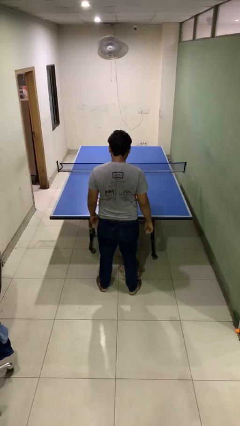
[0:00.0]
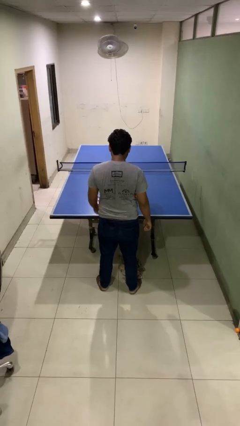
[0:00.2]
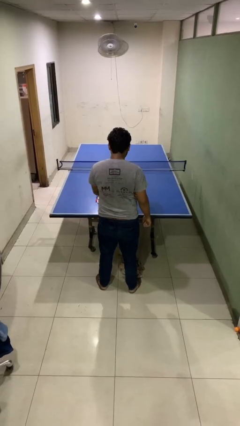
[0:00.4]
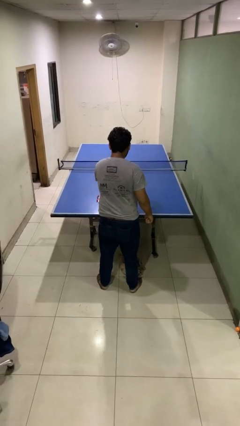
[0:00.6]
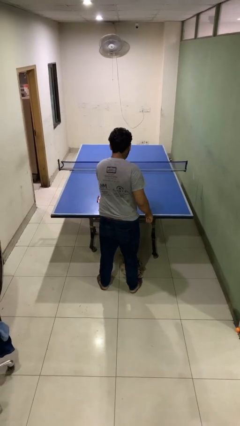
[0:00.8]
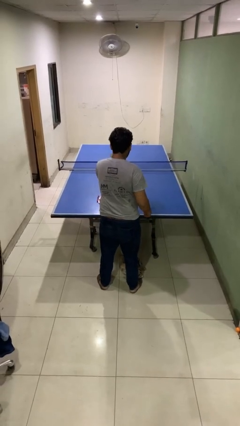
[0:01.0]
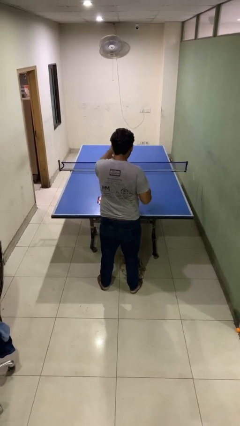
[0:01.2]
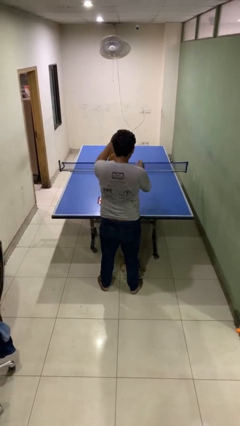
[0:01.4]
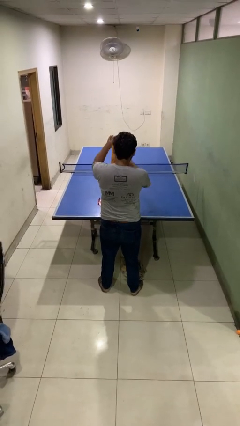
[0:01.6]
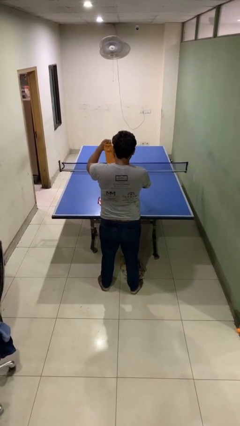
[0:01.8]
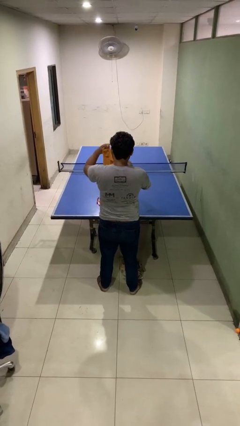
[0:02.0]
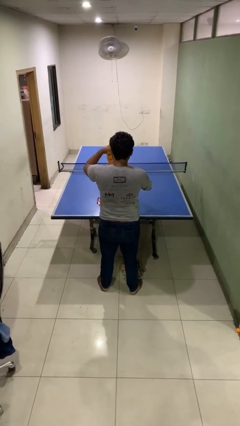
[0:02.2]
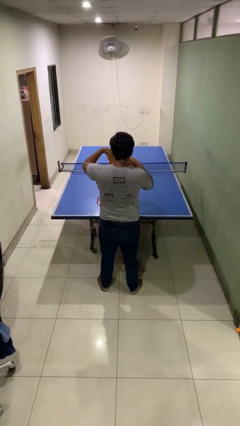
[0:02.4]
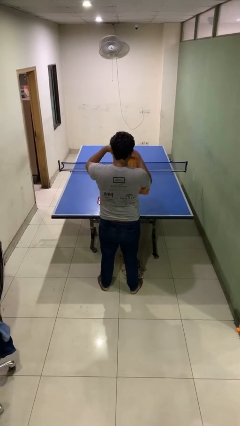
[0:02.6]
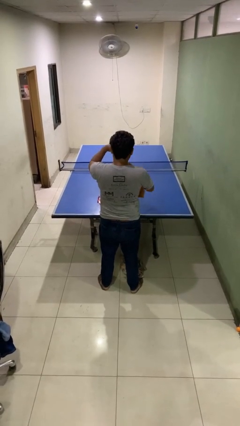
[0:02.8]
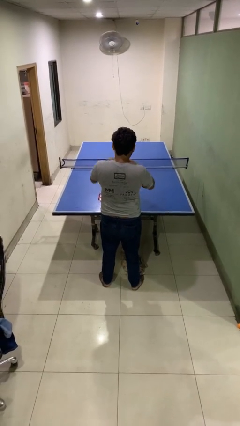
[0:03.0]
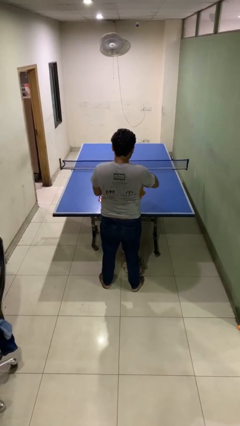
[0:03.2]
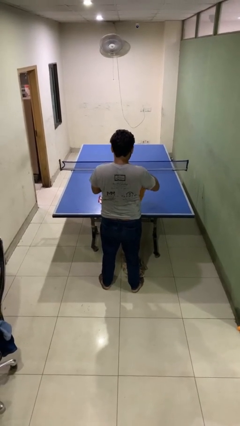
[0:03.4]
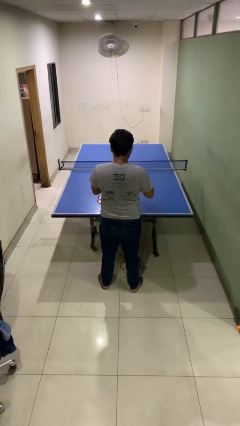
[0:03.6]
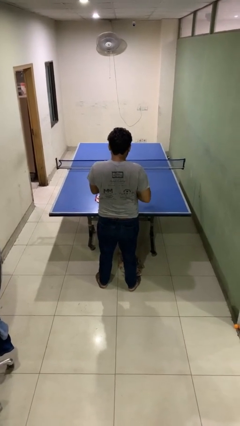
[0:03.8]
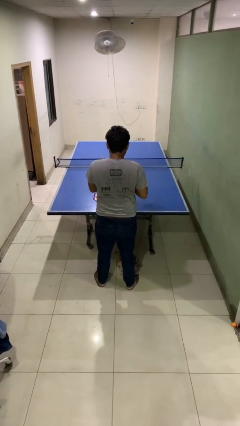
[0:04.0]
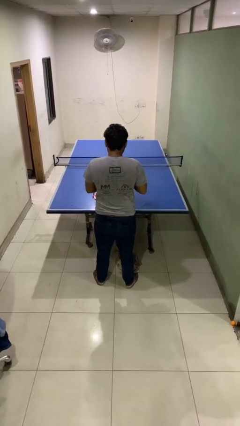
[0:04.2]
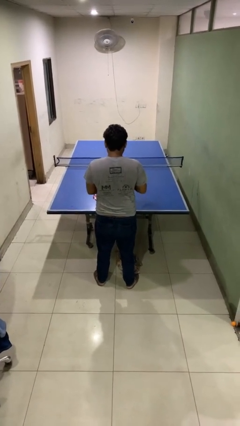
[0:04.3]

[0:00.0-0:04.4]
person folds shirt

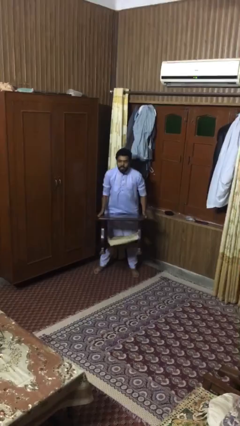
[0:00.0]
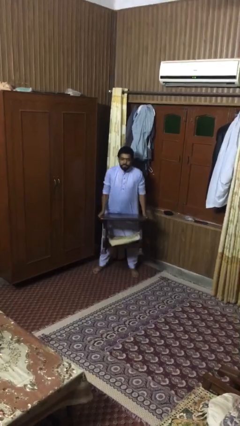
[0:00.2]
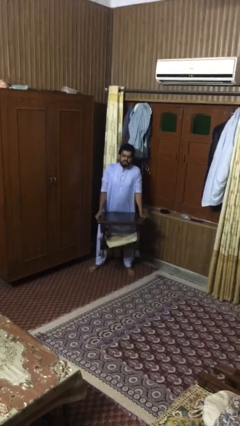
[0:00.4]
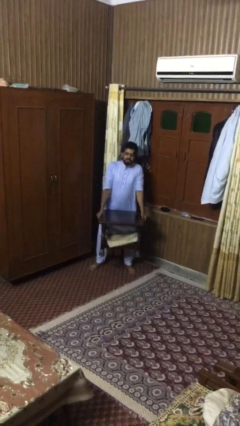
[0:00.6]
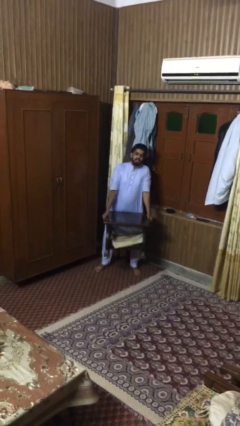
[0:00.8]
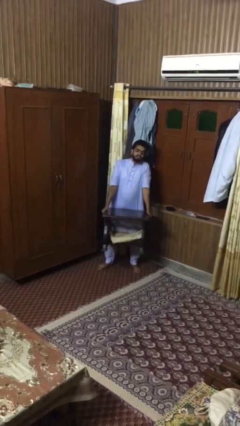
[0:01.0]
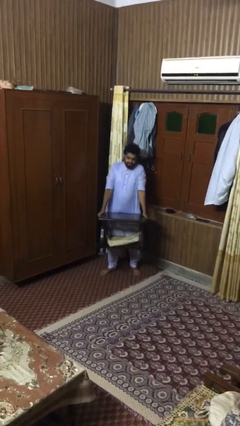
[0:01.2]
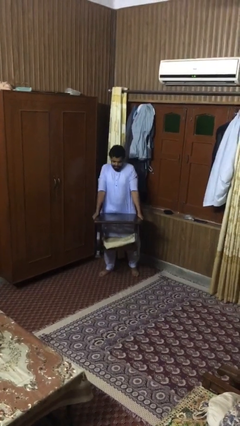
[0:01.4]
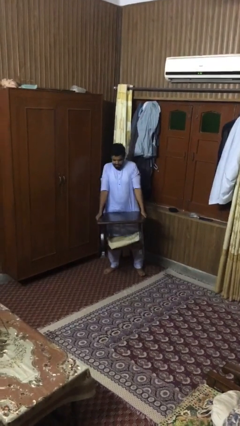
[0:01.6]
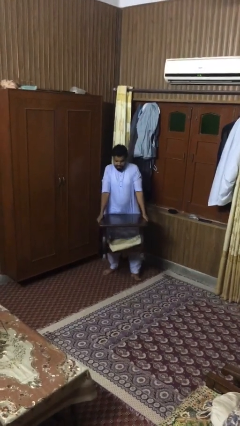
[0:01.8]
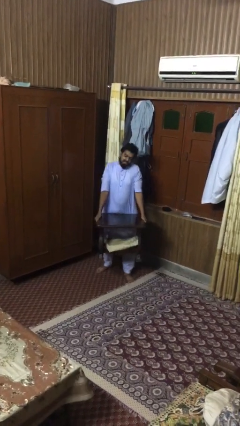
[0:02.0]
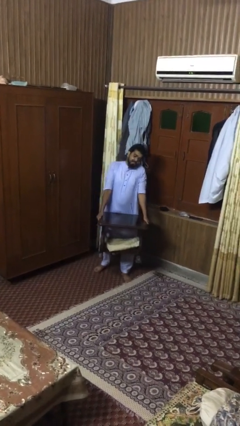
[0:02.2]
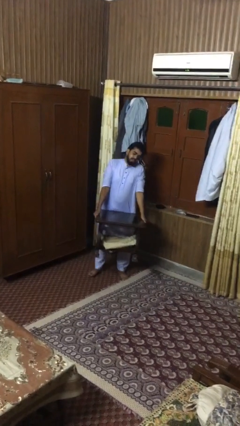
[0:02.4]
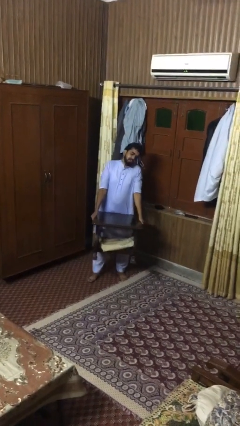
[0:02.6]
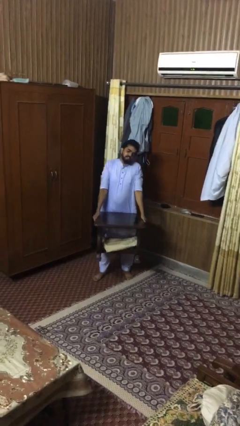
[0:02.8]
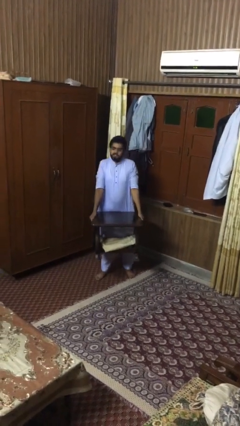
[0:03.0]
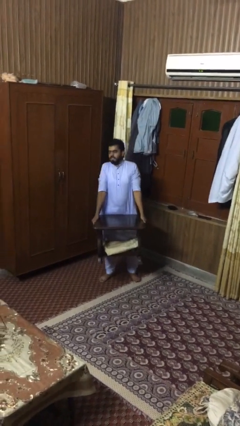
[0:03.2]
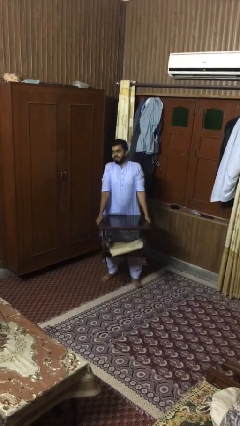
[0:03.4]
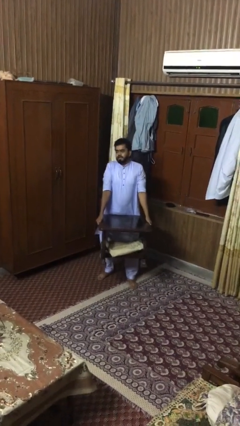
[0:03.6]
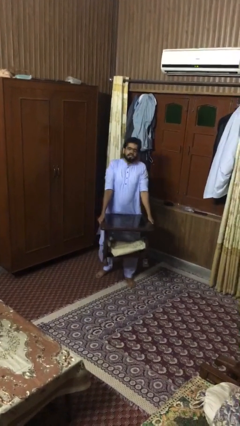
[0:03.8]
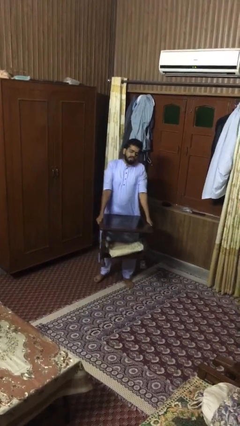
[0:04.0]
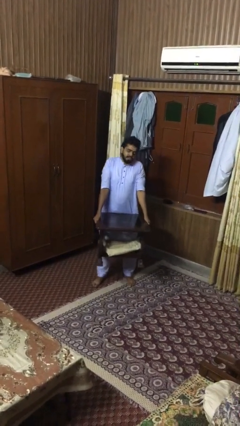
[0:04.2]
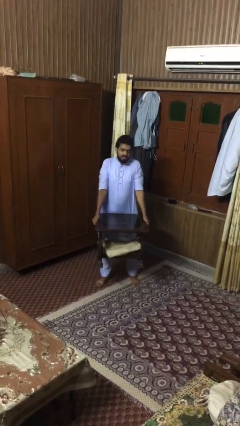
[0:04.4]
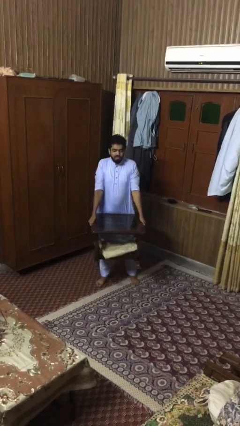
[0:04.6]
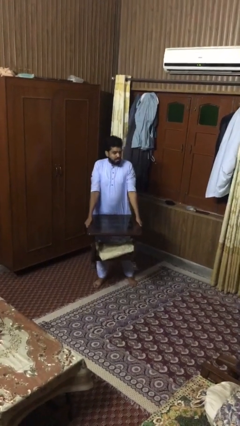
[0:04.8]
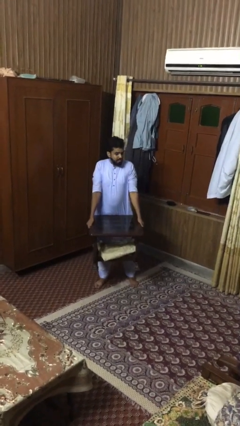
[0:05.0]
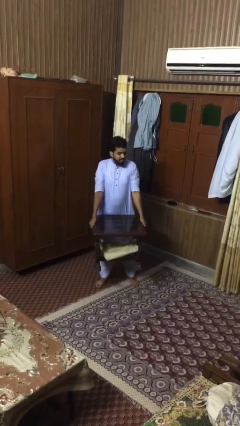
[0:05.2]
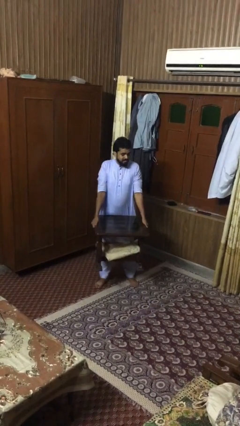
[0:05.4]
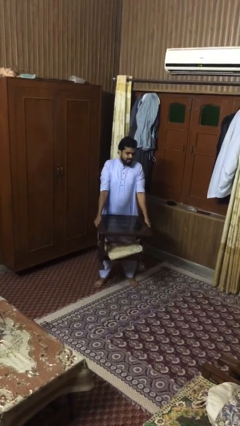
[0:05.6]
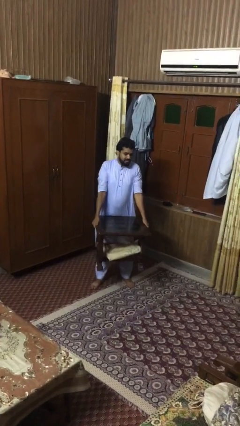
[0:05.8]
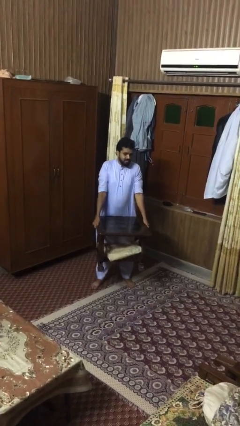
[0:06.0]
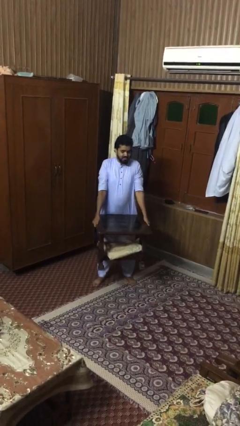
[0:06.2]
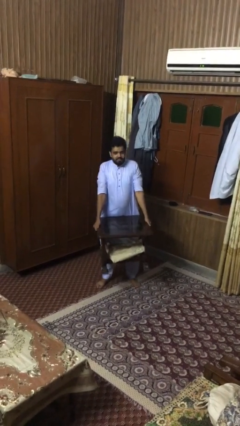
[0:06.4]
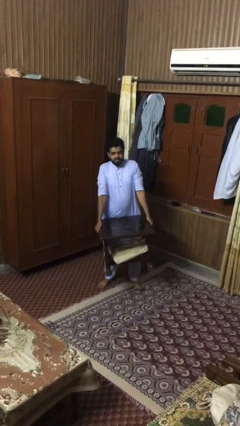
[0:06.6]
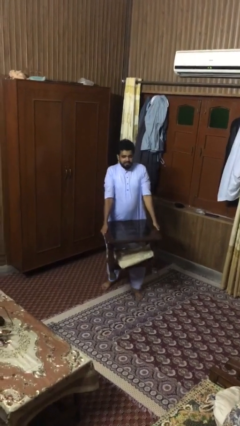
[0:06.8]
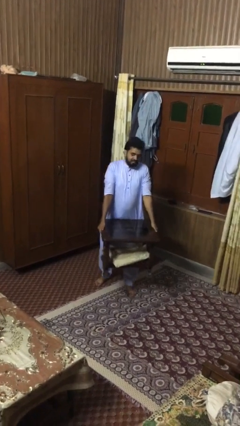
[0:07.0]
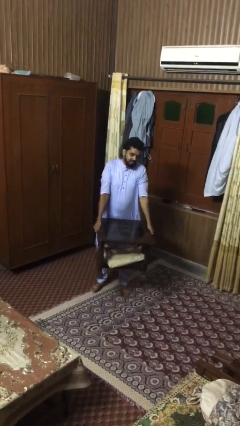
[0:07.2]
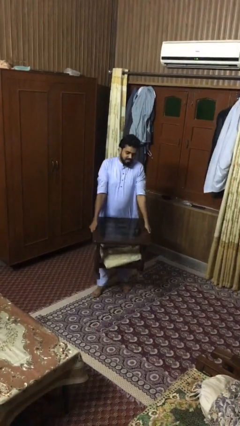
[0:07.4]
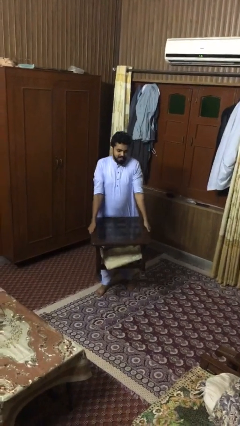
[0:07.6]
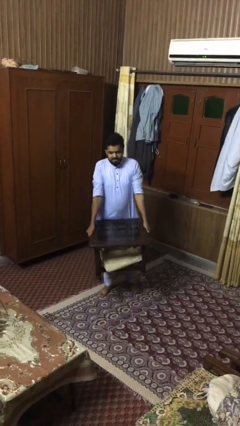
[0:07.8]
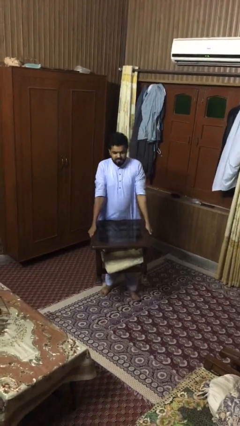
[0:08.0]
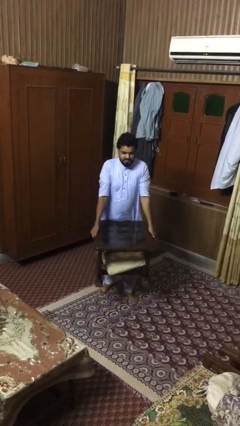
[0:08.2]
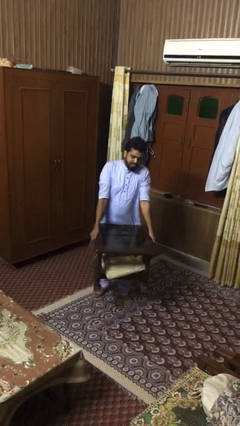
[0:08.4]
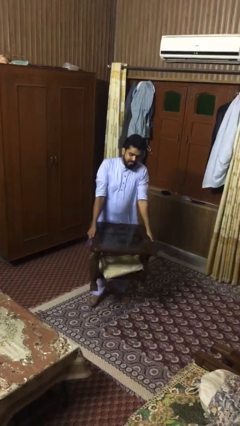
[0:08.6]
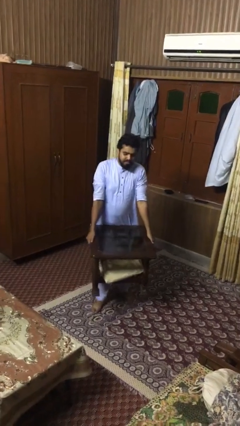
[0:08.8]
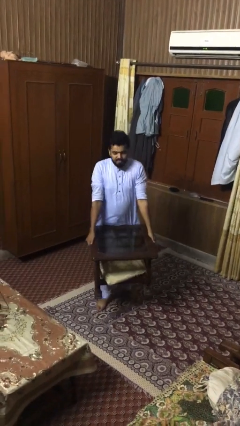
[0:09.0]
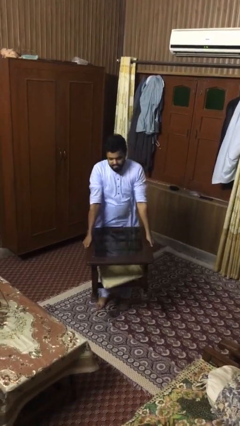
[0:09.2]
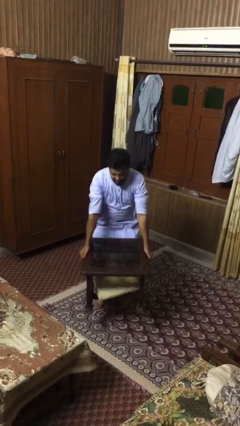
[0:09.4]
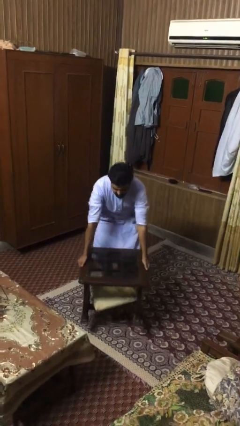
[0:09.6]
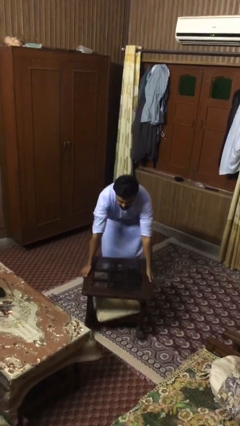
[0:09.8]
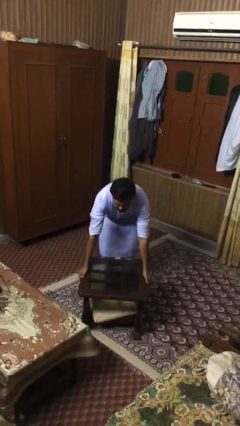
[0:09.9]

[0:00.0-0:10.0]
person carries heavy object

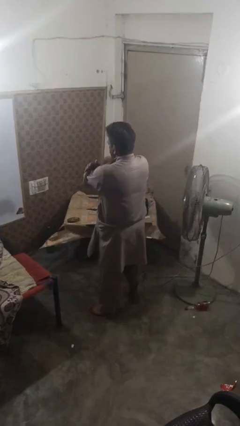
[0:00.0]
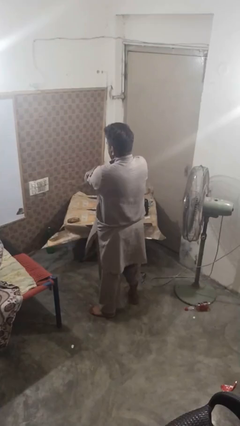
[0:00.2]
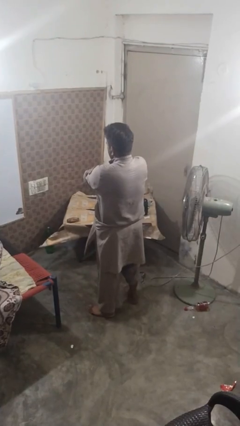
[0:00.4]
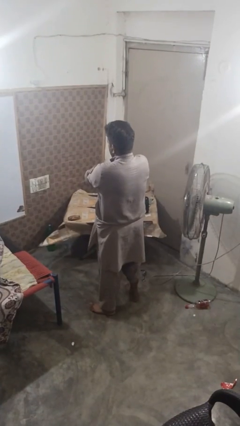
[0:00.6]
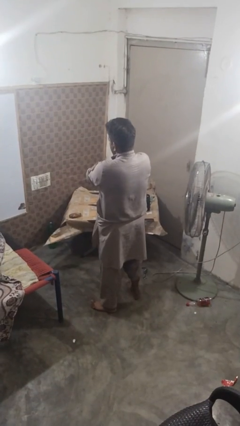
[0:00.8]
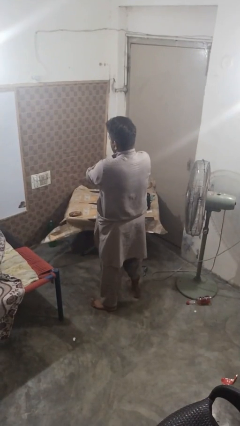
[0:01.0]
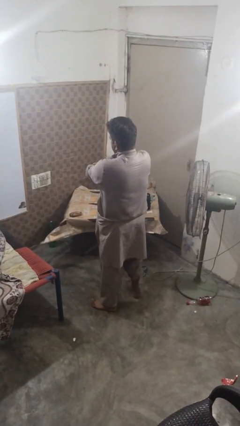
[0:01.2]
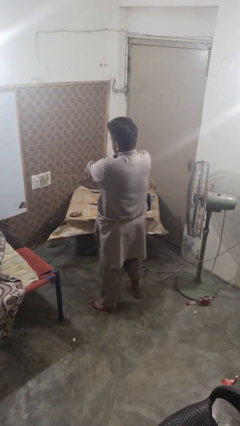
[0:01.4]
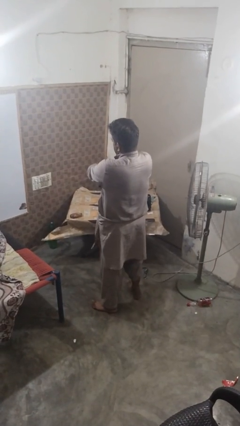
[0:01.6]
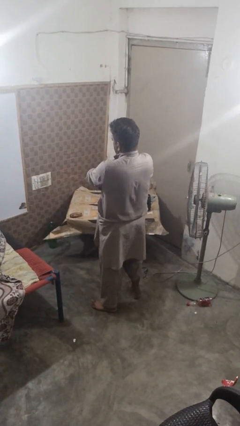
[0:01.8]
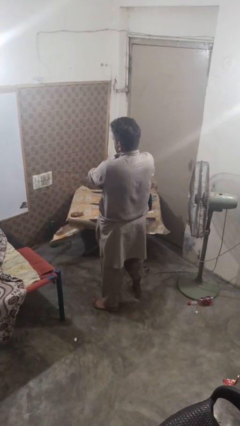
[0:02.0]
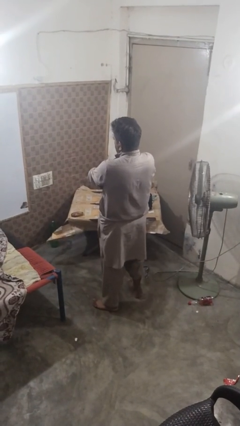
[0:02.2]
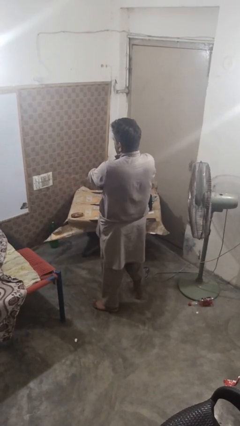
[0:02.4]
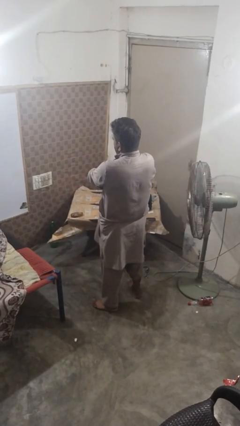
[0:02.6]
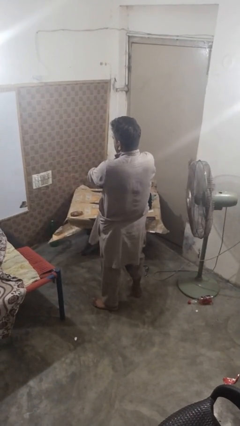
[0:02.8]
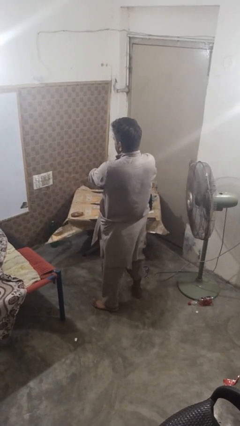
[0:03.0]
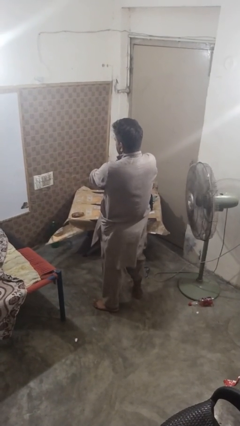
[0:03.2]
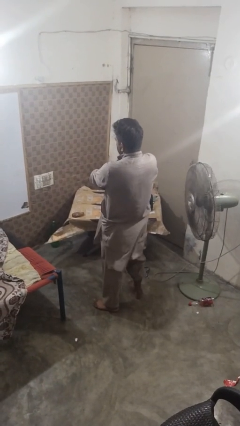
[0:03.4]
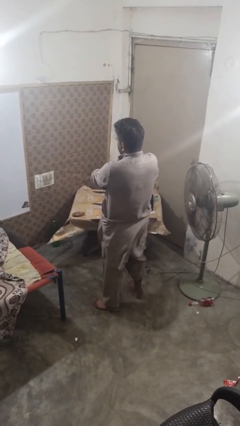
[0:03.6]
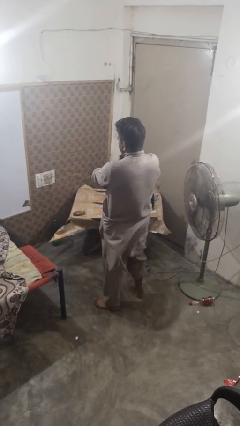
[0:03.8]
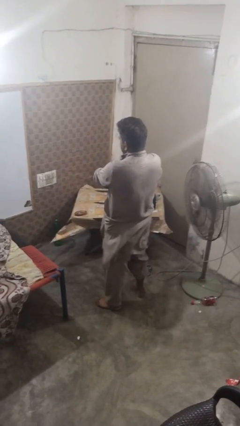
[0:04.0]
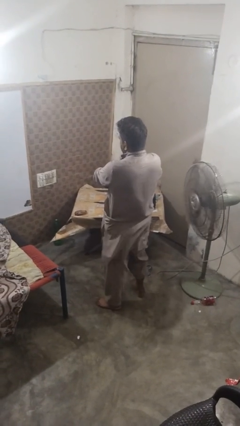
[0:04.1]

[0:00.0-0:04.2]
person crosses arms
